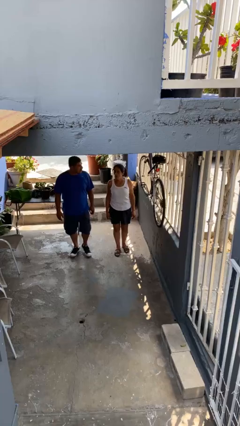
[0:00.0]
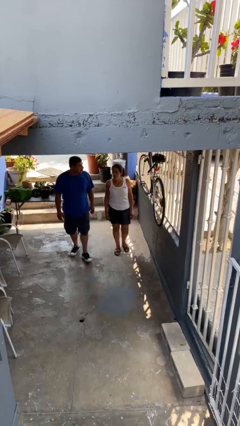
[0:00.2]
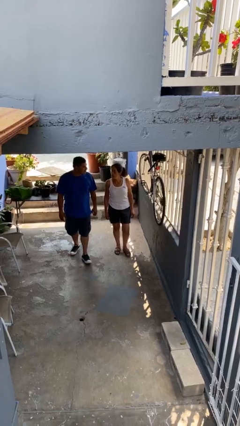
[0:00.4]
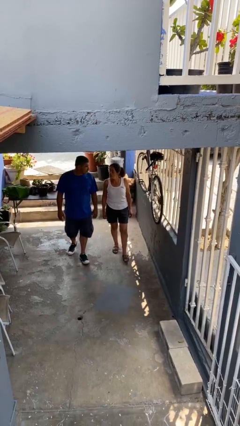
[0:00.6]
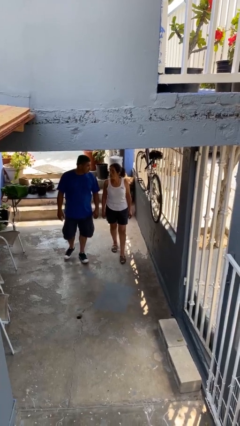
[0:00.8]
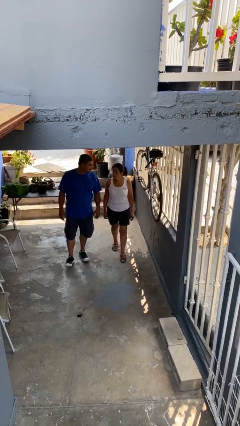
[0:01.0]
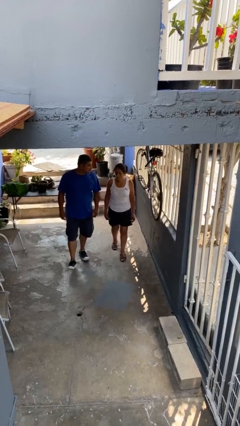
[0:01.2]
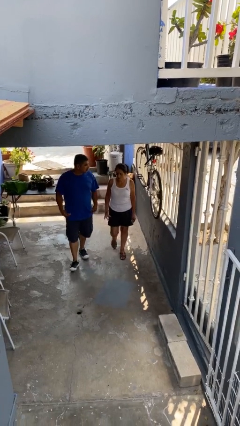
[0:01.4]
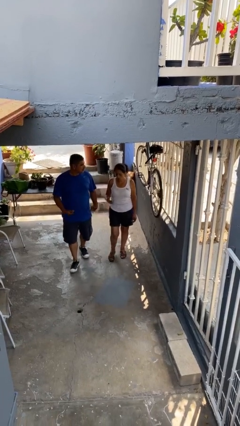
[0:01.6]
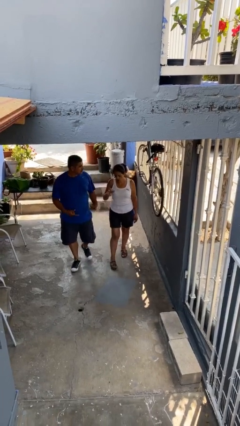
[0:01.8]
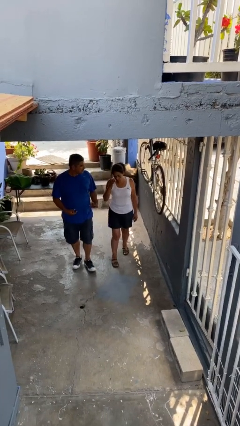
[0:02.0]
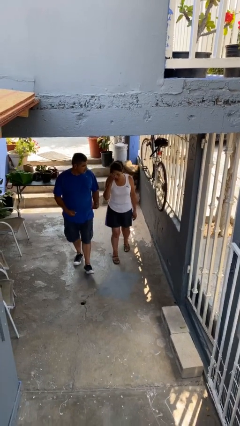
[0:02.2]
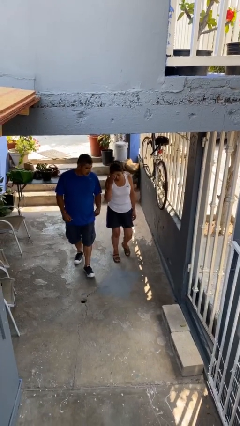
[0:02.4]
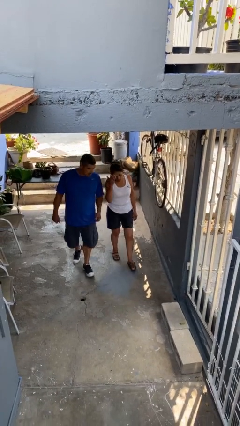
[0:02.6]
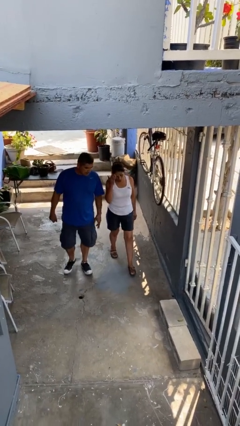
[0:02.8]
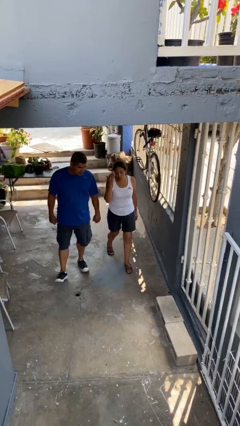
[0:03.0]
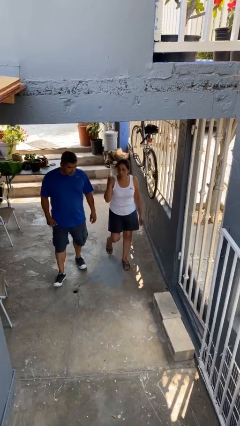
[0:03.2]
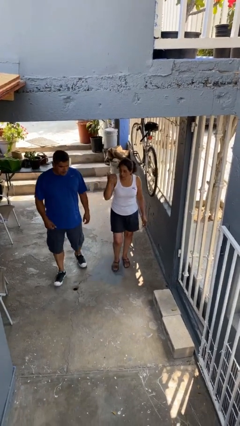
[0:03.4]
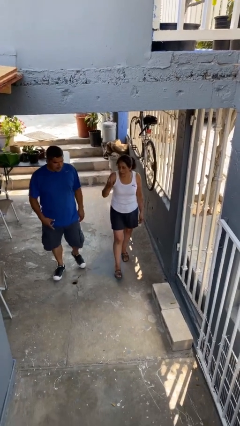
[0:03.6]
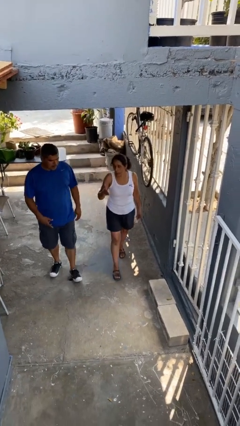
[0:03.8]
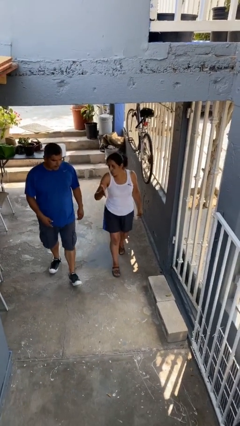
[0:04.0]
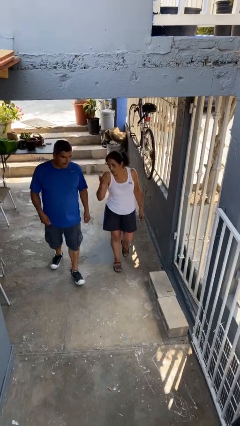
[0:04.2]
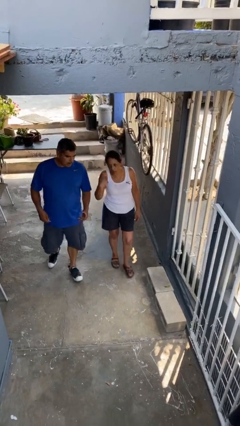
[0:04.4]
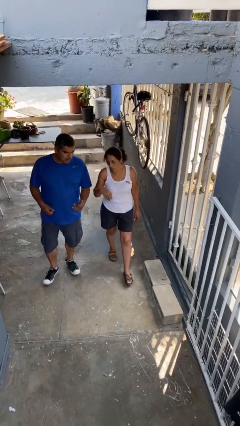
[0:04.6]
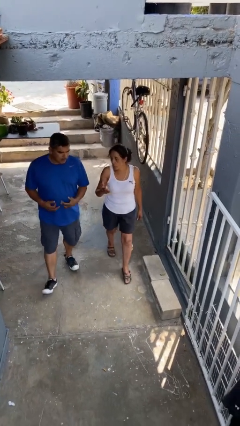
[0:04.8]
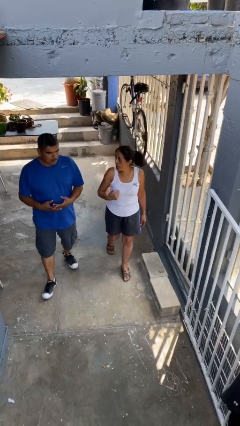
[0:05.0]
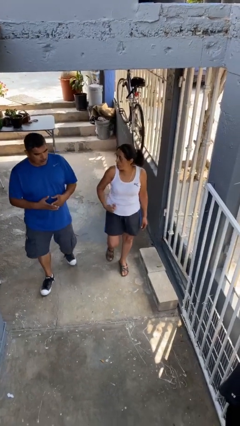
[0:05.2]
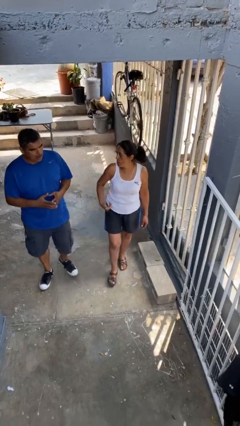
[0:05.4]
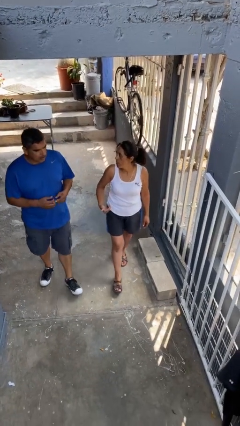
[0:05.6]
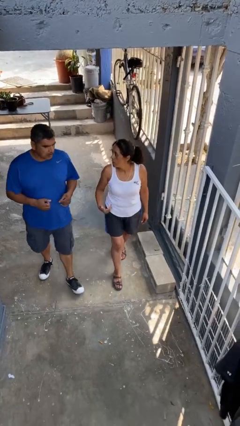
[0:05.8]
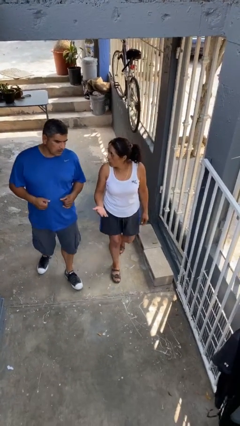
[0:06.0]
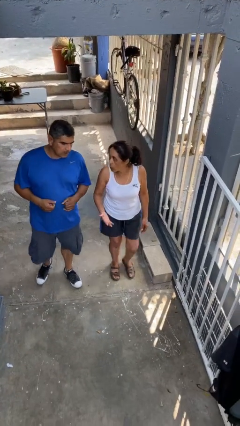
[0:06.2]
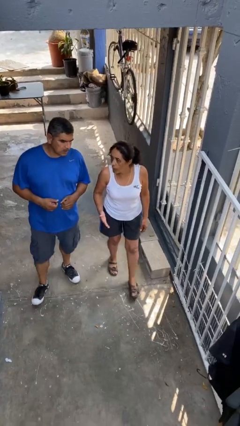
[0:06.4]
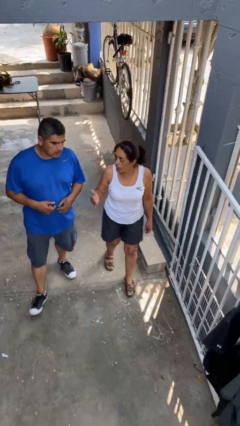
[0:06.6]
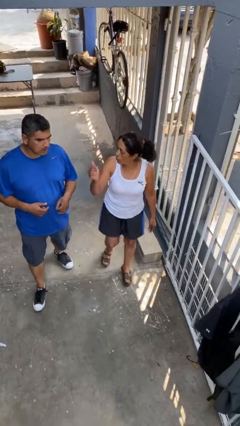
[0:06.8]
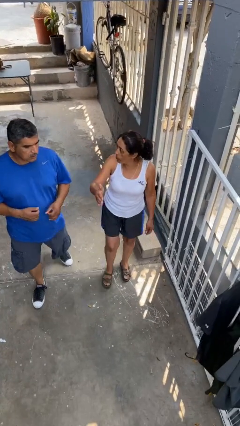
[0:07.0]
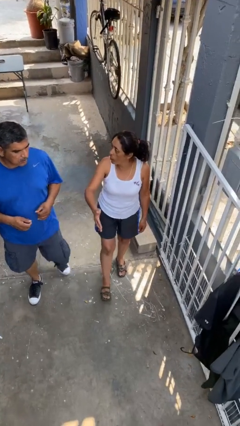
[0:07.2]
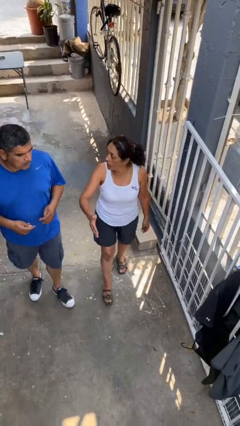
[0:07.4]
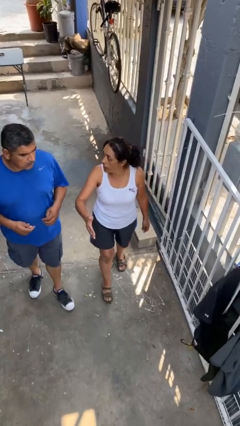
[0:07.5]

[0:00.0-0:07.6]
person talks to person

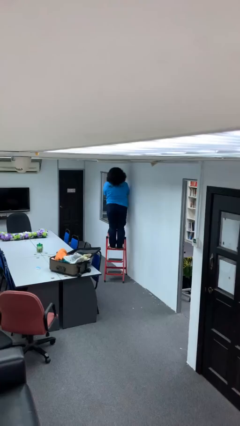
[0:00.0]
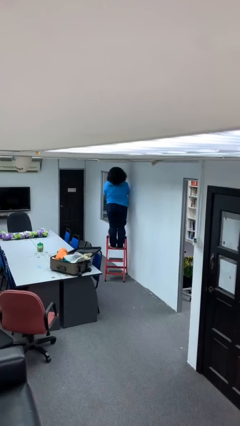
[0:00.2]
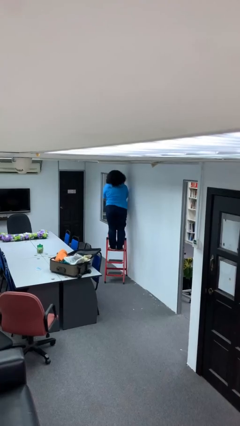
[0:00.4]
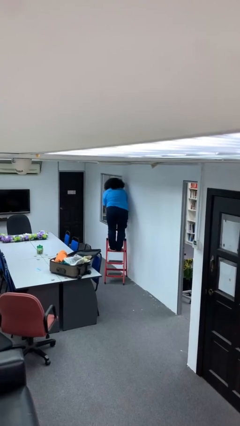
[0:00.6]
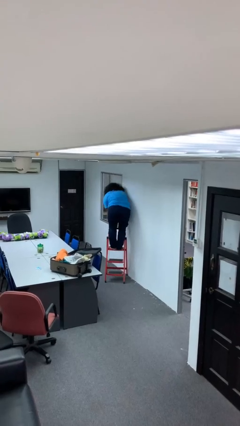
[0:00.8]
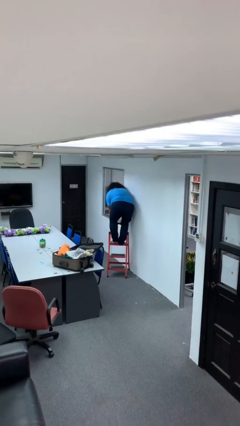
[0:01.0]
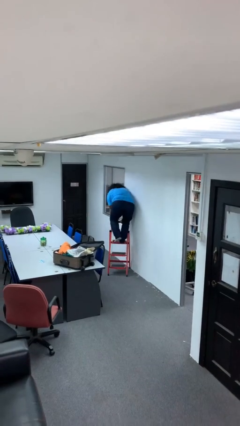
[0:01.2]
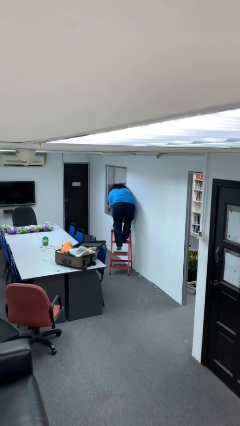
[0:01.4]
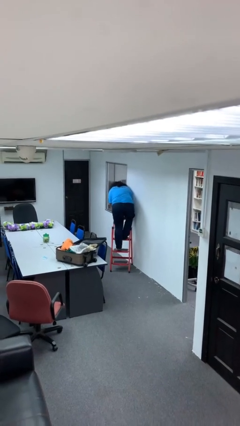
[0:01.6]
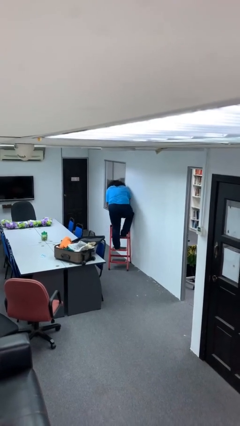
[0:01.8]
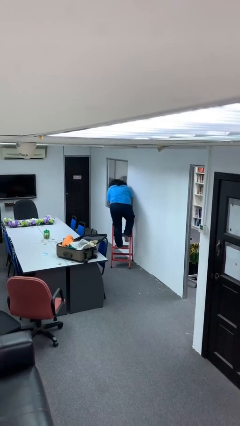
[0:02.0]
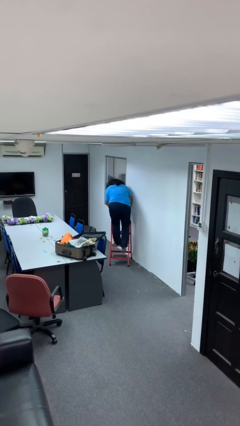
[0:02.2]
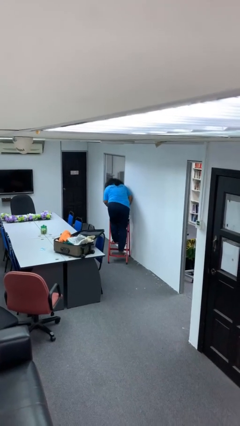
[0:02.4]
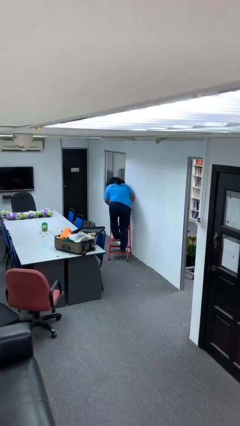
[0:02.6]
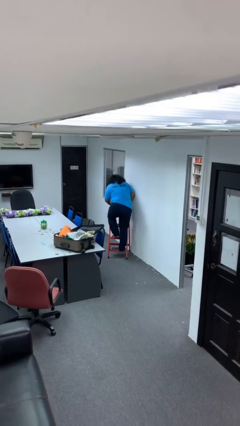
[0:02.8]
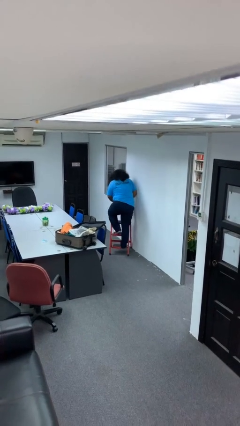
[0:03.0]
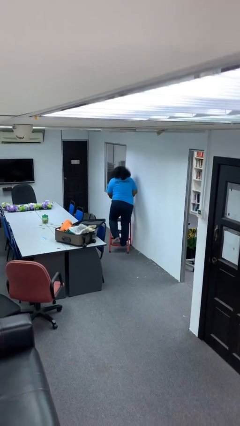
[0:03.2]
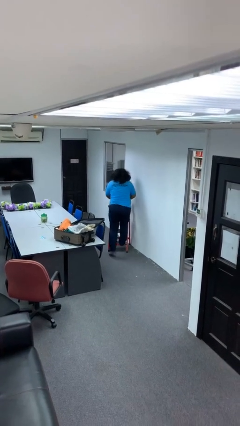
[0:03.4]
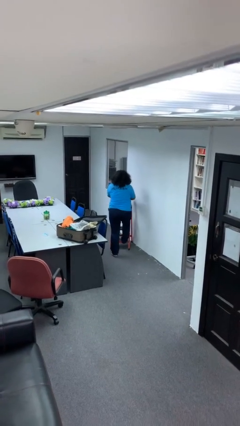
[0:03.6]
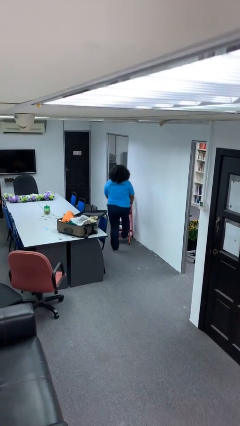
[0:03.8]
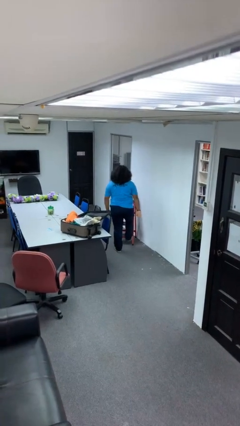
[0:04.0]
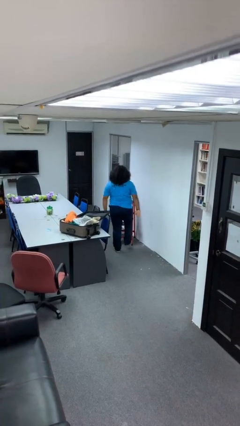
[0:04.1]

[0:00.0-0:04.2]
person climbs down ladder

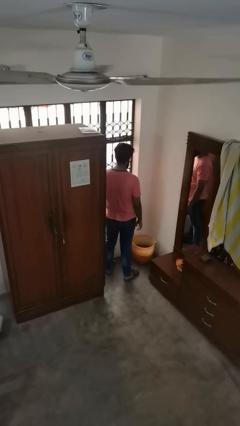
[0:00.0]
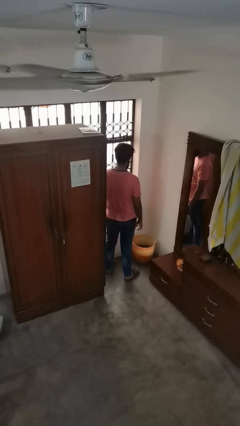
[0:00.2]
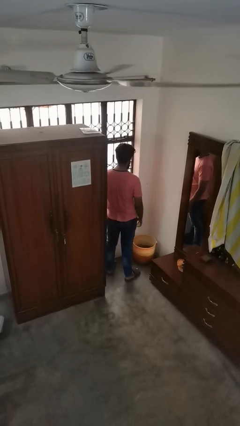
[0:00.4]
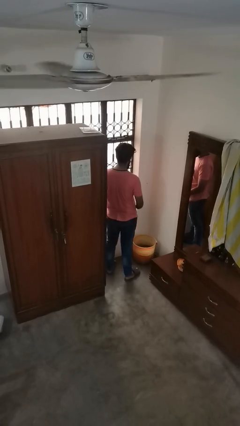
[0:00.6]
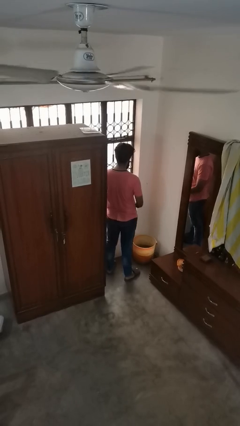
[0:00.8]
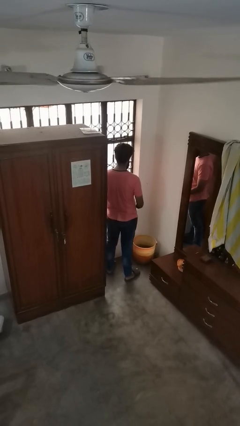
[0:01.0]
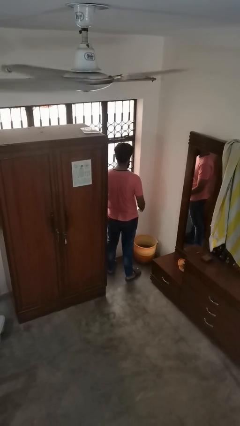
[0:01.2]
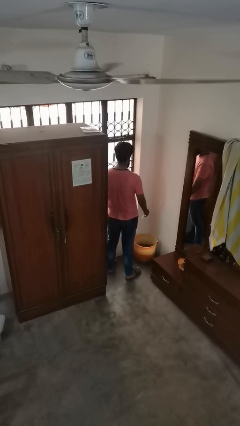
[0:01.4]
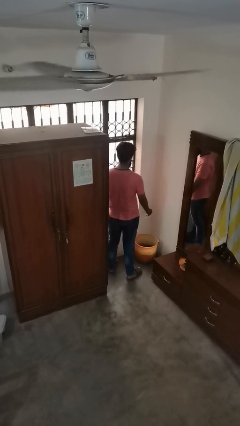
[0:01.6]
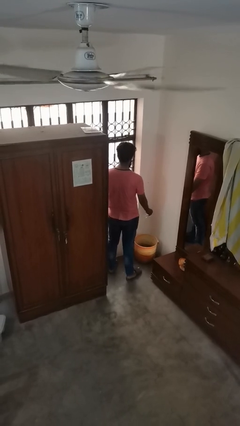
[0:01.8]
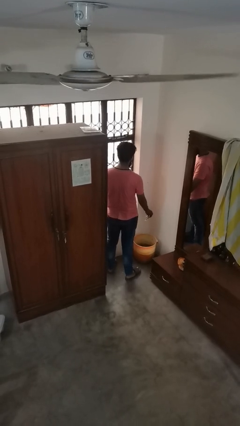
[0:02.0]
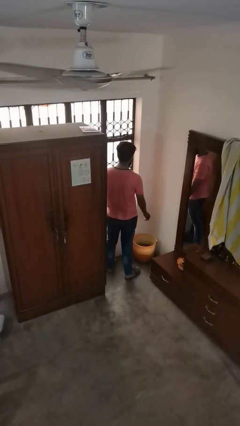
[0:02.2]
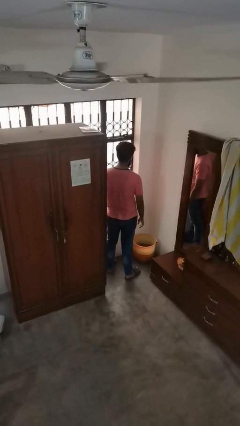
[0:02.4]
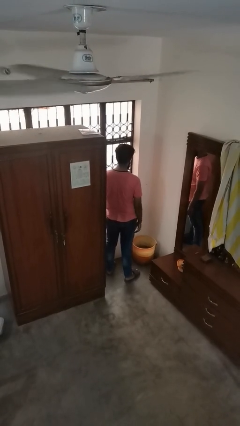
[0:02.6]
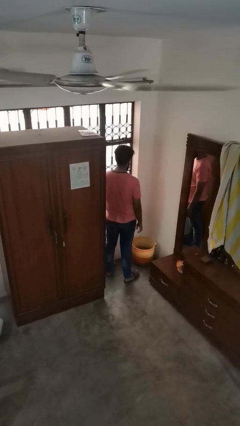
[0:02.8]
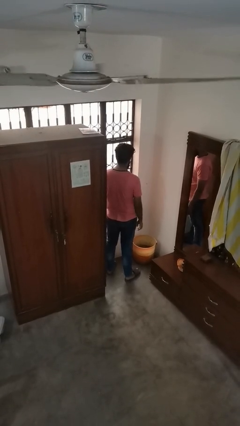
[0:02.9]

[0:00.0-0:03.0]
person discards trash

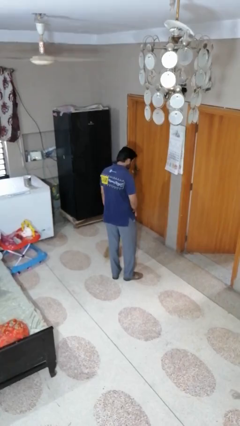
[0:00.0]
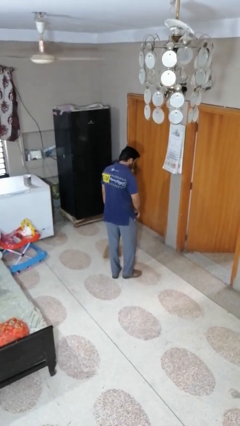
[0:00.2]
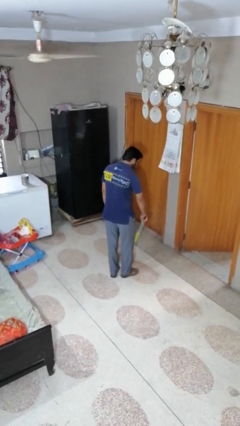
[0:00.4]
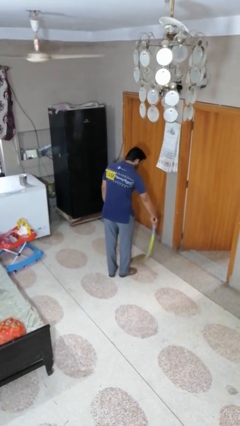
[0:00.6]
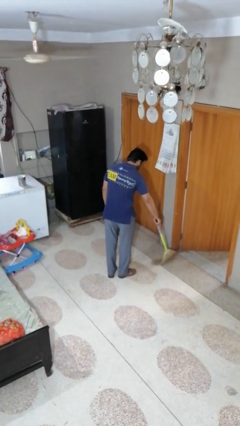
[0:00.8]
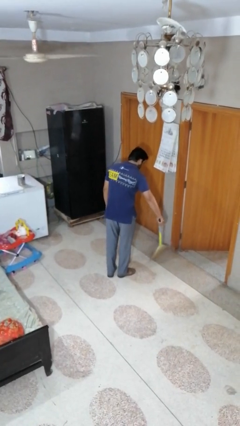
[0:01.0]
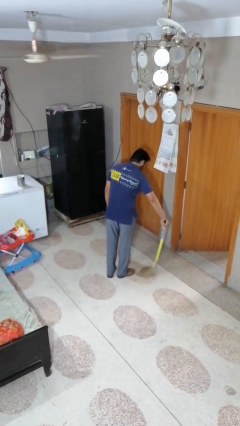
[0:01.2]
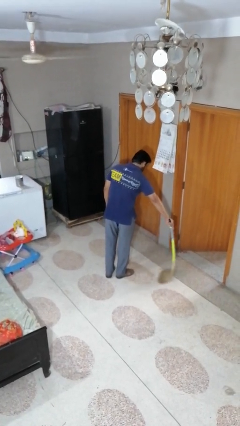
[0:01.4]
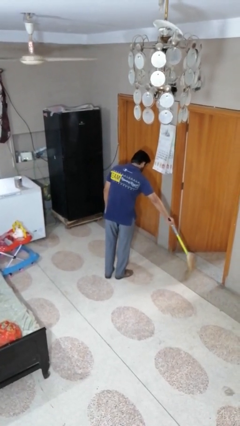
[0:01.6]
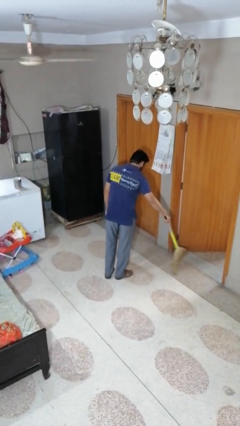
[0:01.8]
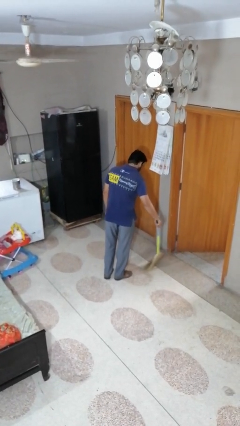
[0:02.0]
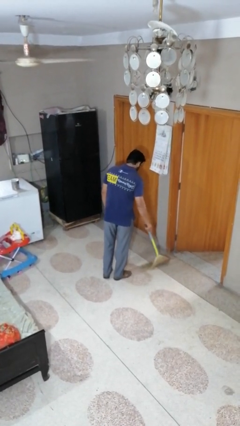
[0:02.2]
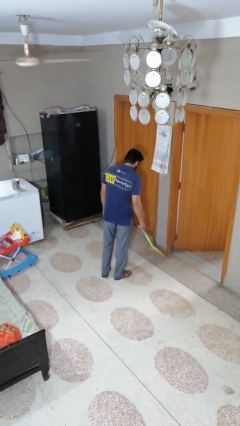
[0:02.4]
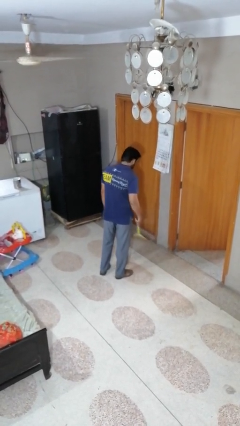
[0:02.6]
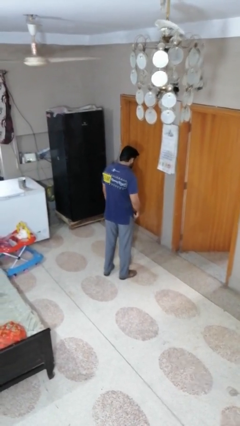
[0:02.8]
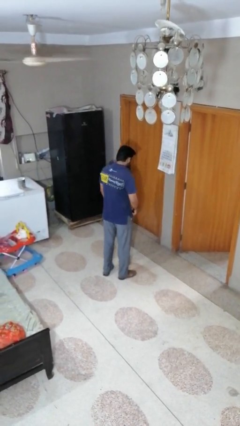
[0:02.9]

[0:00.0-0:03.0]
person sweeps floor
